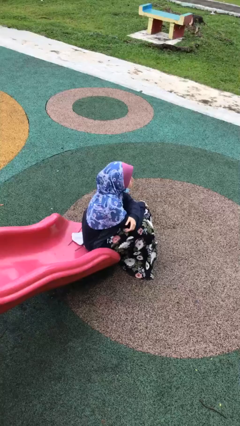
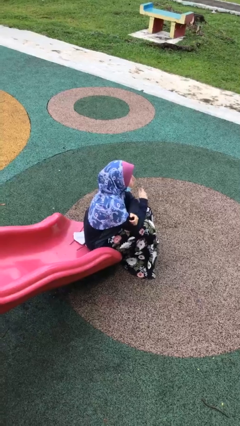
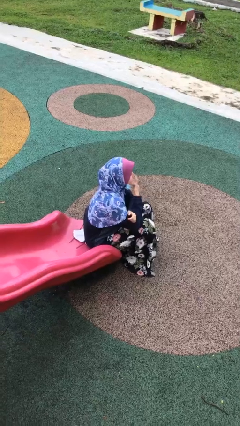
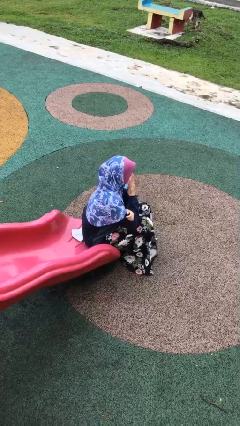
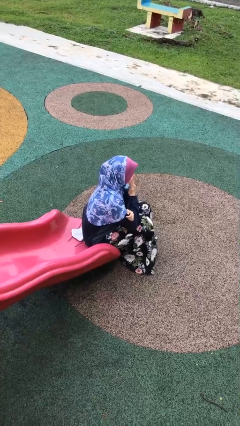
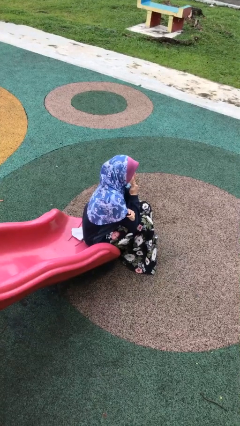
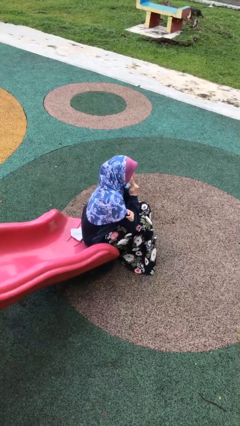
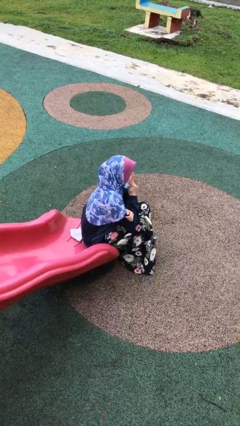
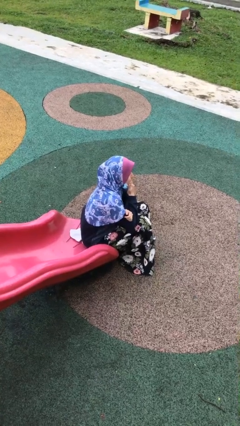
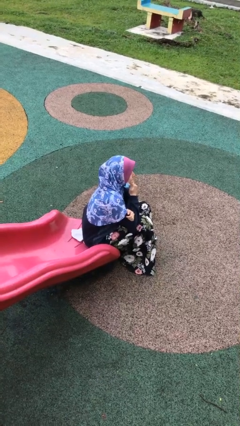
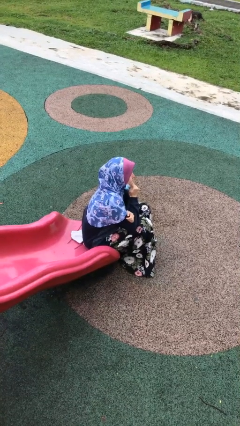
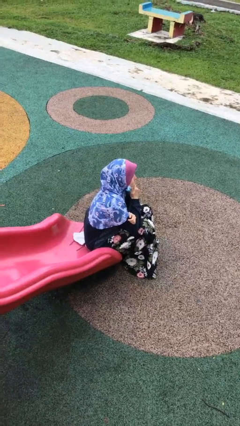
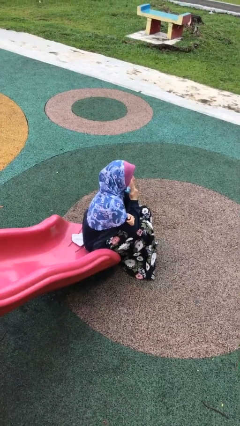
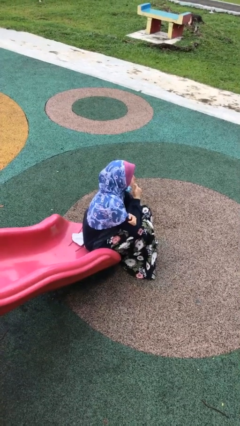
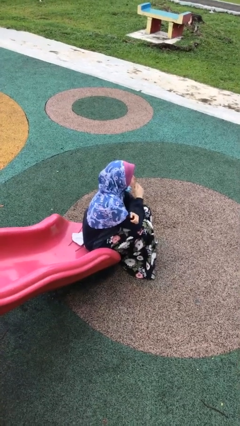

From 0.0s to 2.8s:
person strokes chin

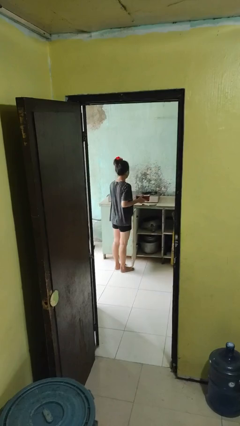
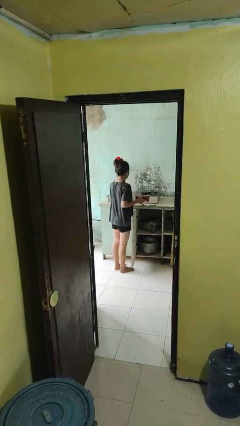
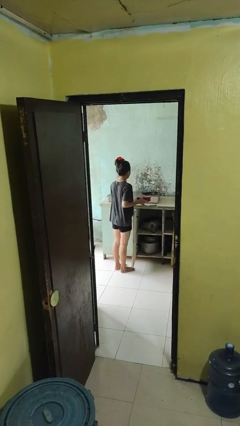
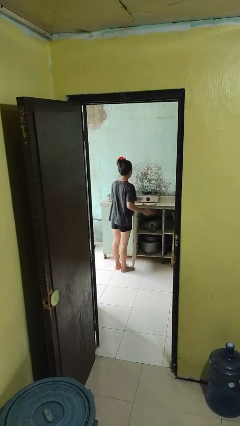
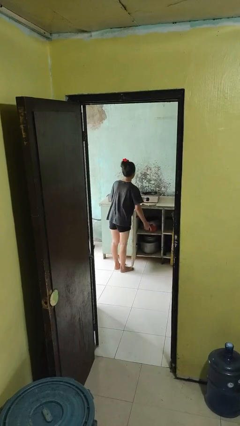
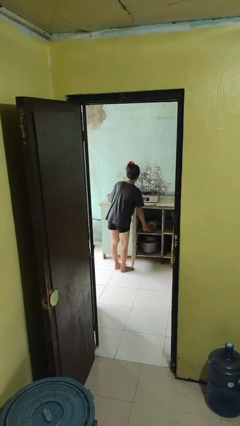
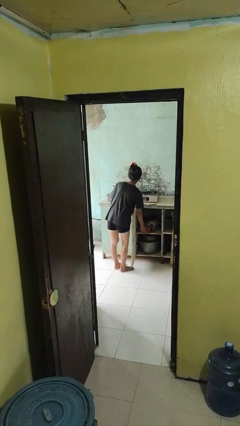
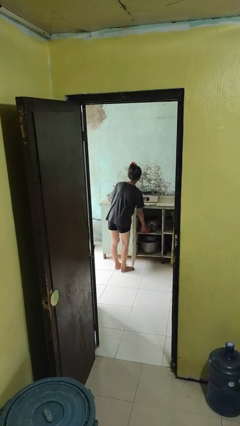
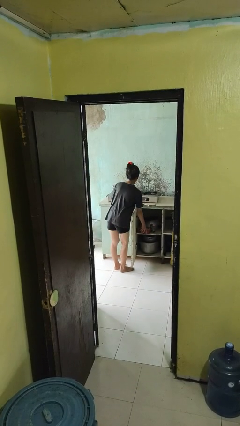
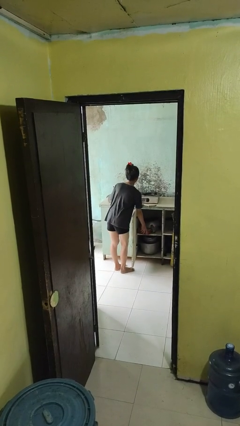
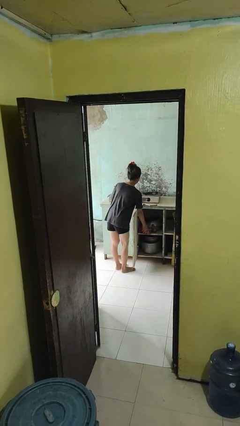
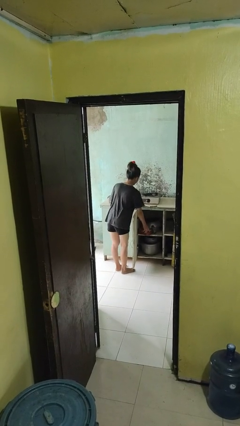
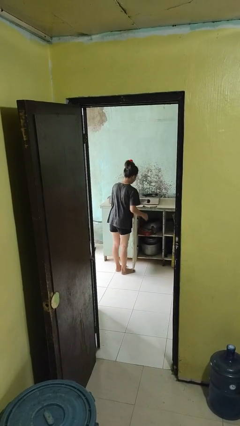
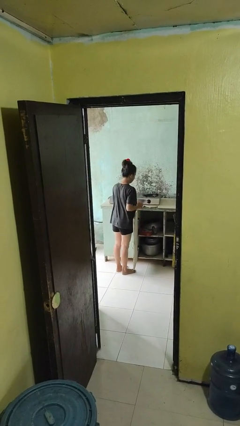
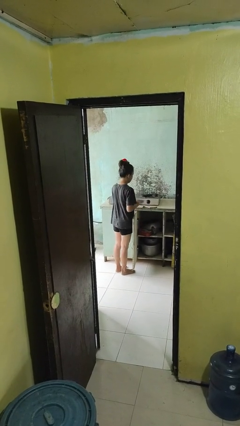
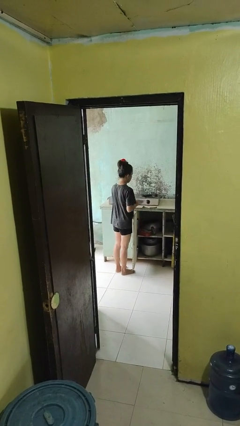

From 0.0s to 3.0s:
person puts object in cabinet

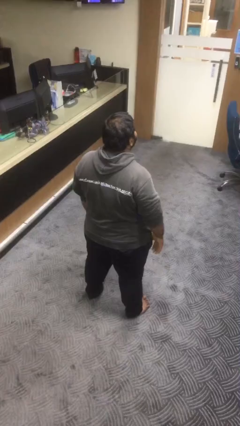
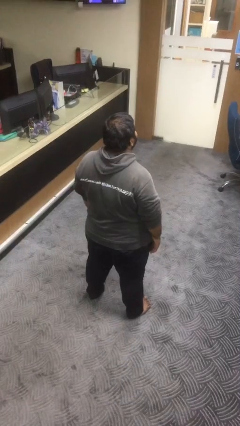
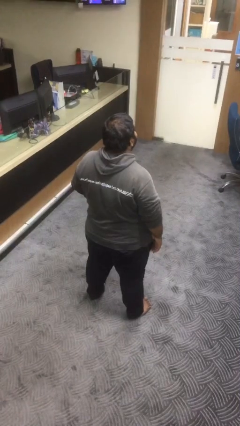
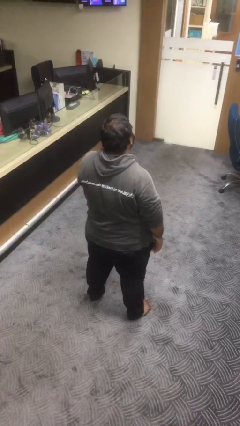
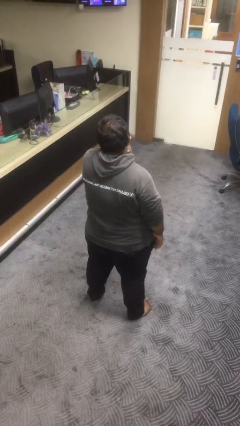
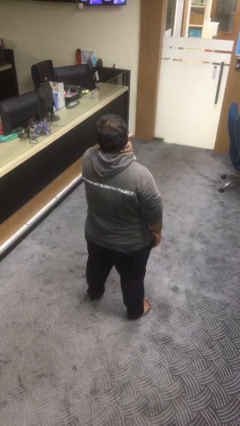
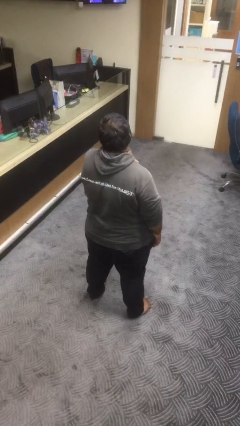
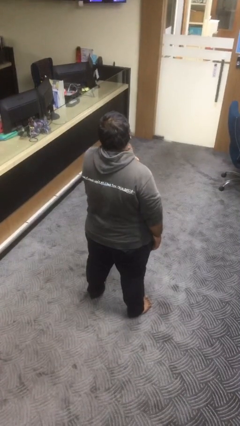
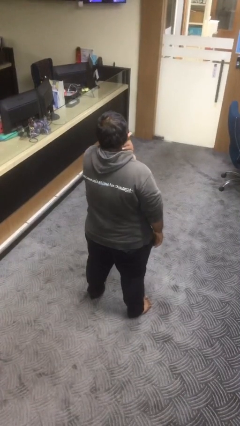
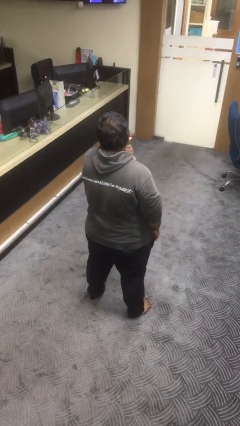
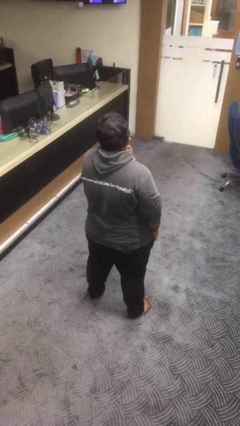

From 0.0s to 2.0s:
person rubs neck

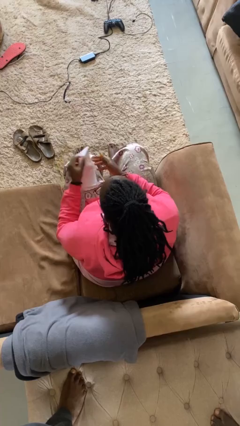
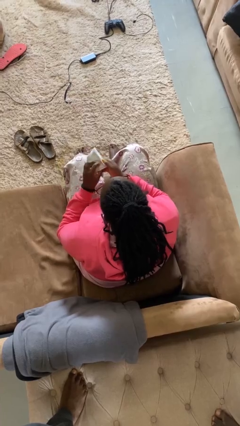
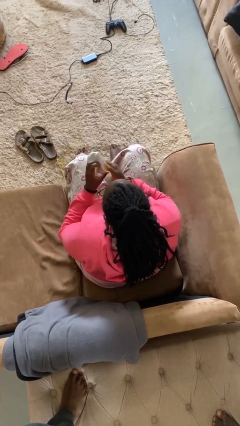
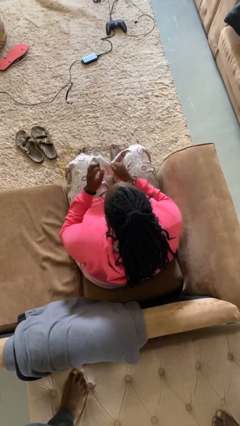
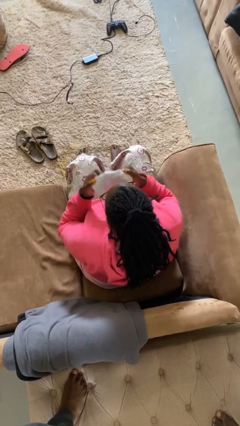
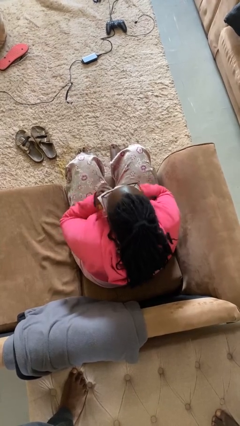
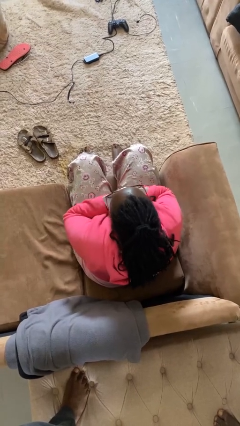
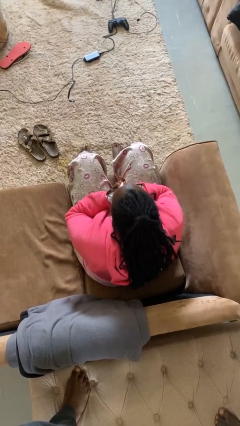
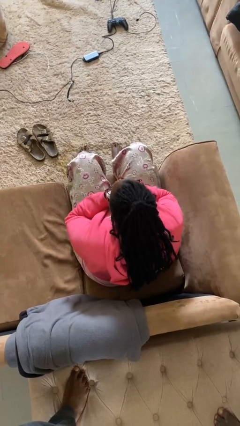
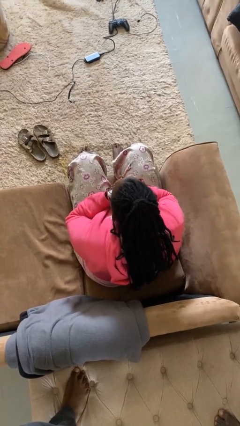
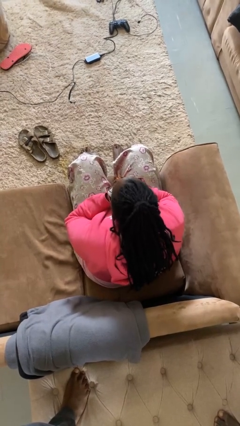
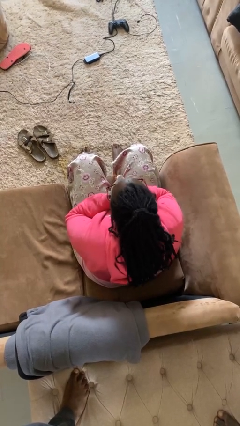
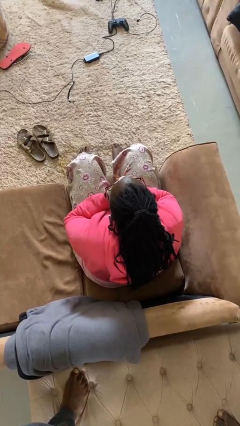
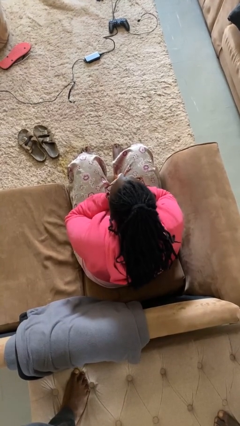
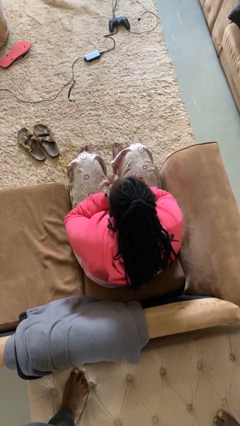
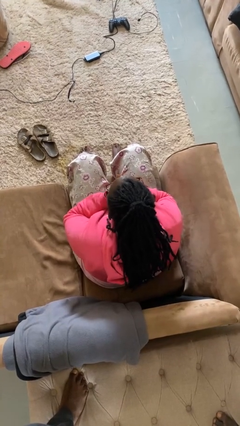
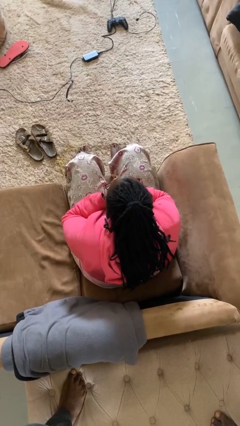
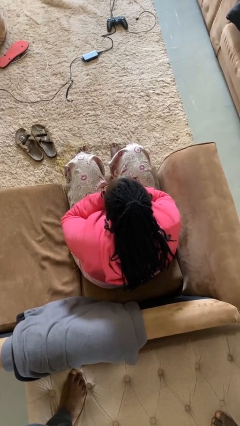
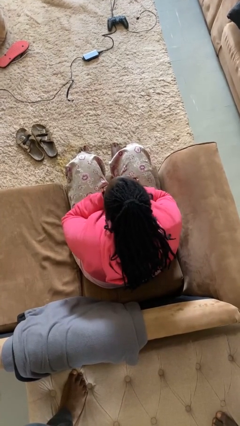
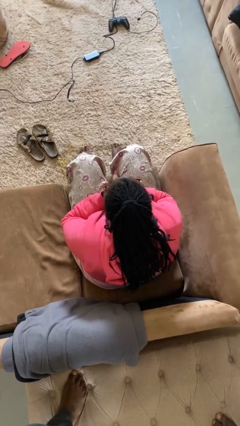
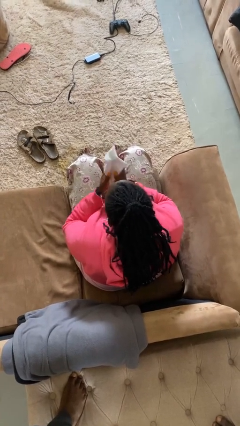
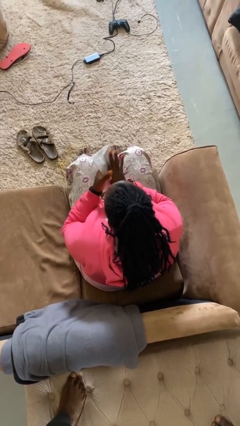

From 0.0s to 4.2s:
person blows nose

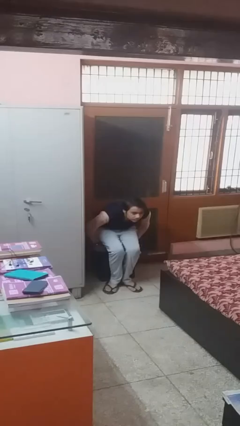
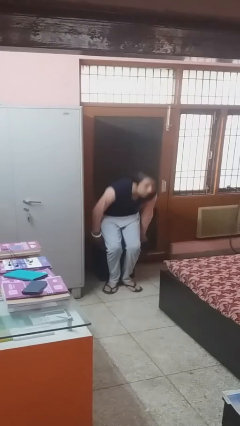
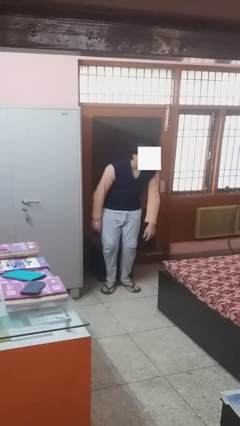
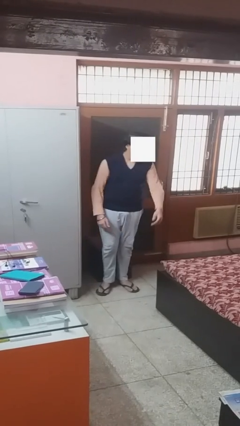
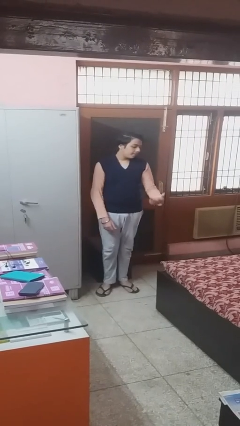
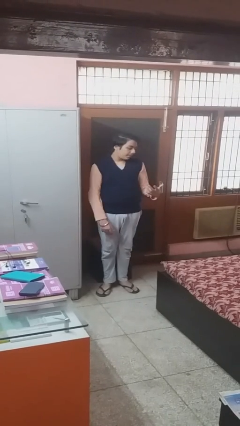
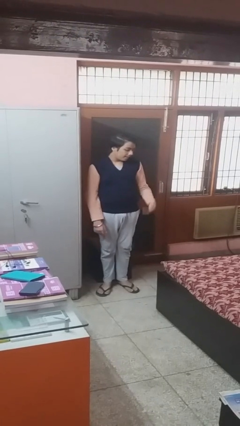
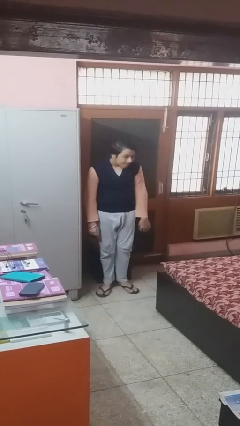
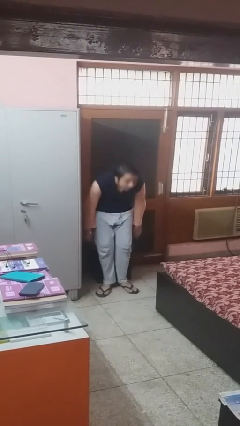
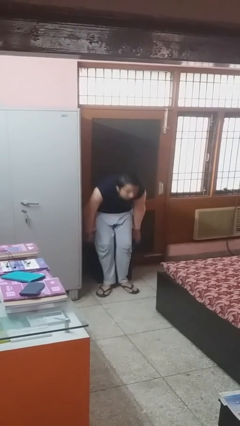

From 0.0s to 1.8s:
person stands up

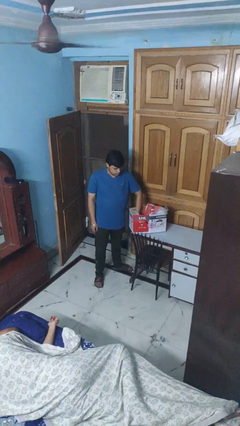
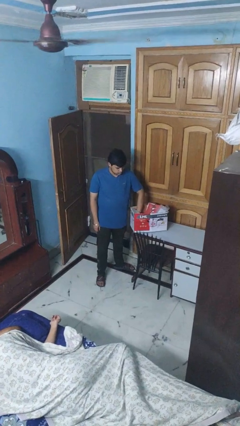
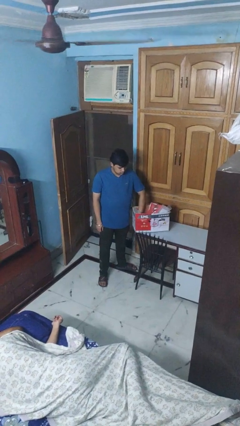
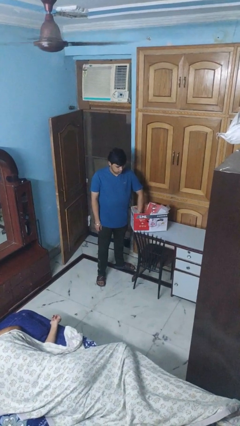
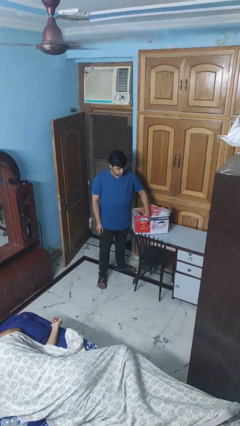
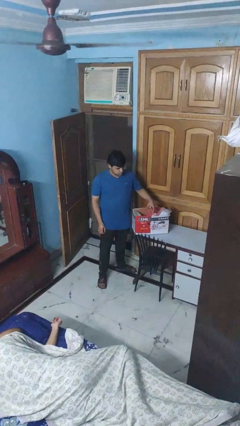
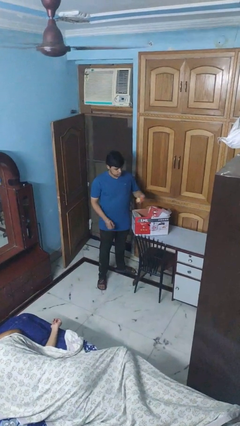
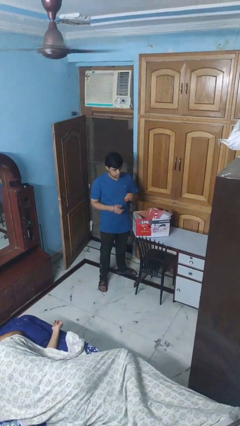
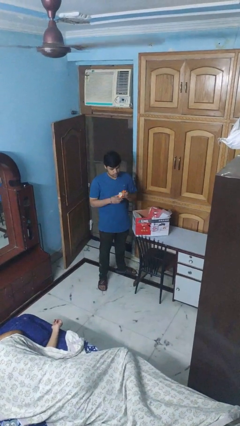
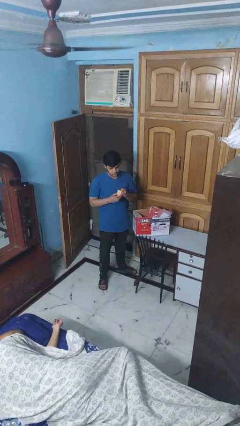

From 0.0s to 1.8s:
person takes object from box

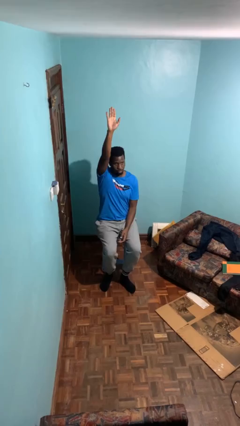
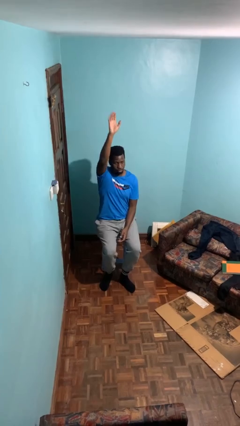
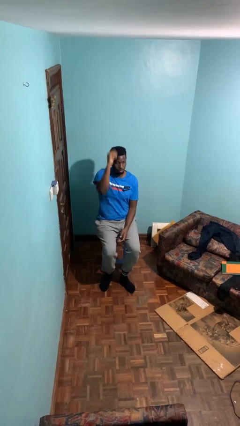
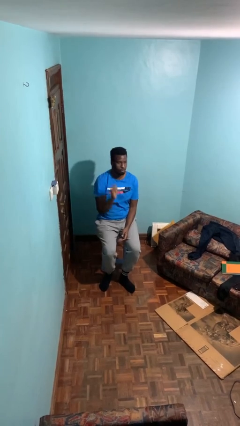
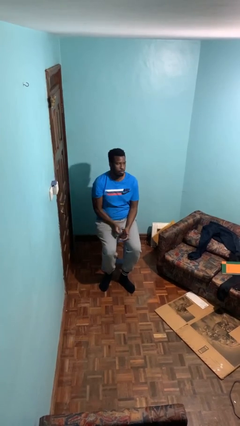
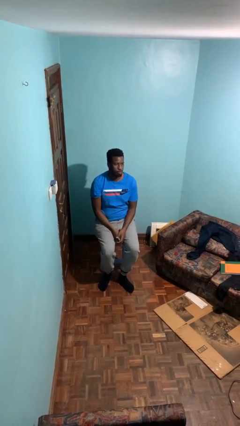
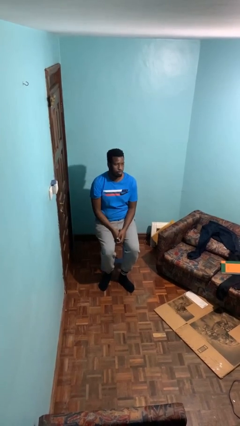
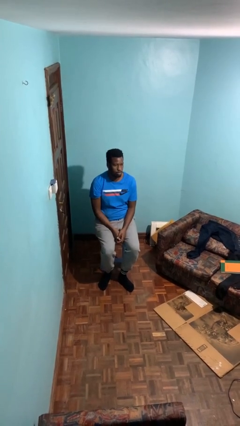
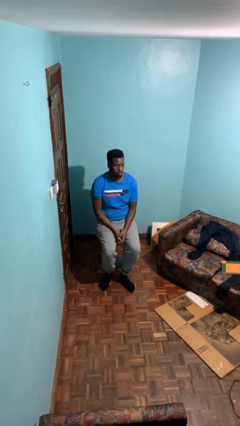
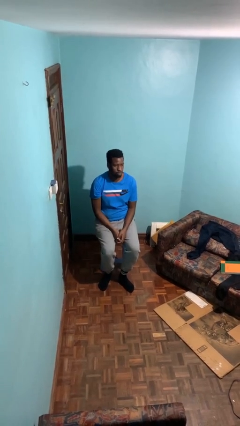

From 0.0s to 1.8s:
person gestures lower hand
